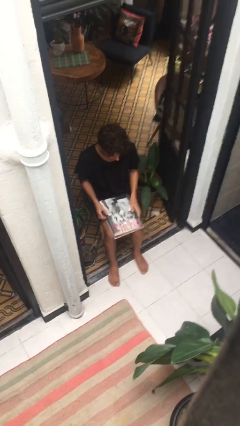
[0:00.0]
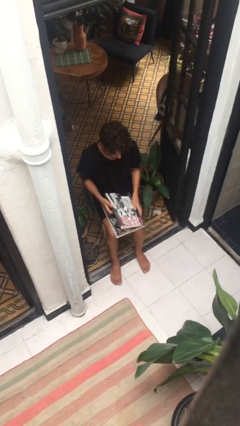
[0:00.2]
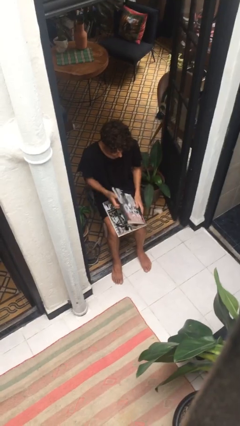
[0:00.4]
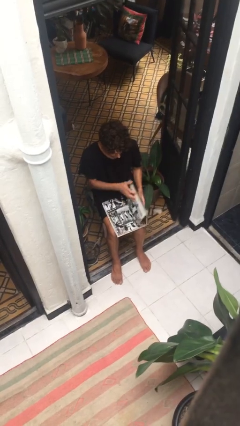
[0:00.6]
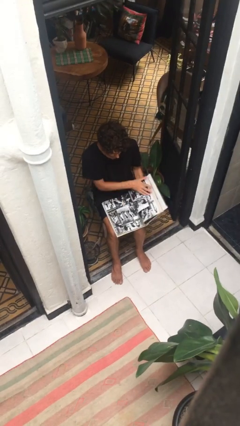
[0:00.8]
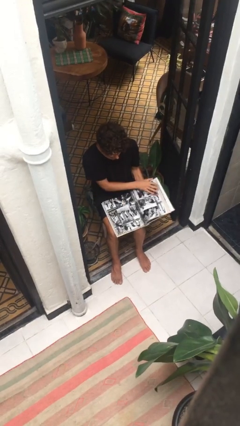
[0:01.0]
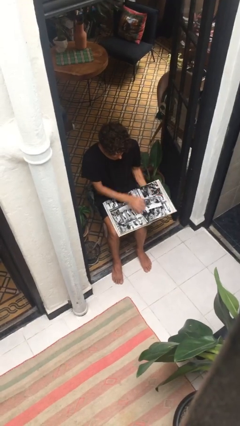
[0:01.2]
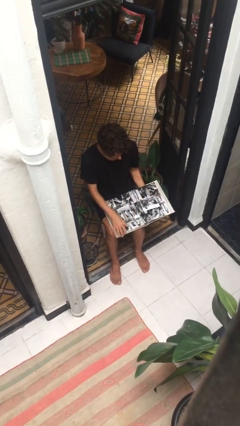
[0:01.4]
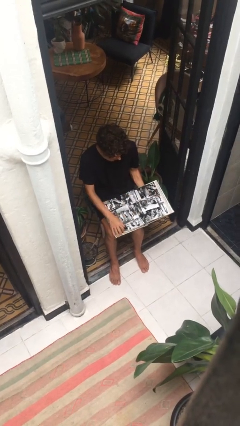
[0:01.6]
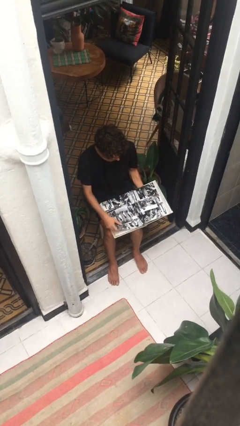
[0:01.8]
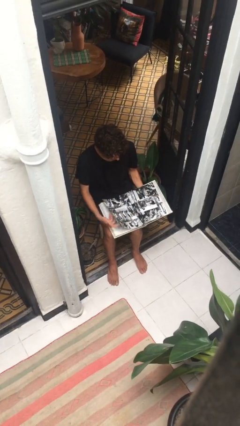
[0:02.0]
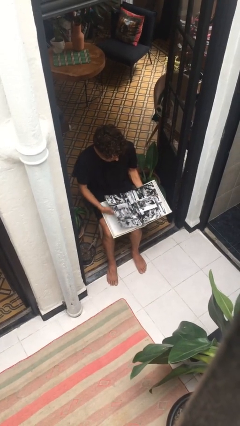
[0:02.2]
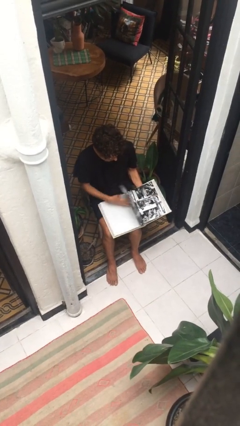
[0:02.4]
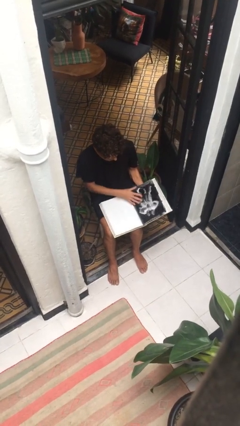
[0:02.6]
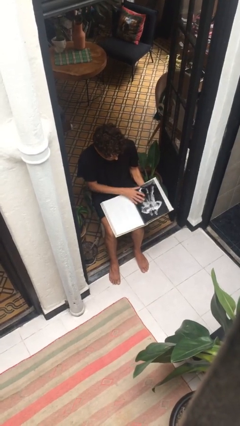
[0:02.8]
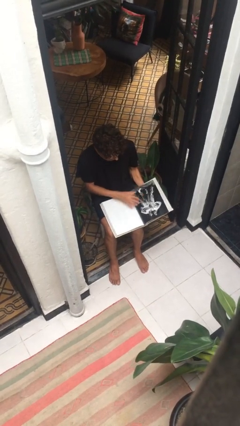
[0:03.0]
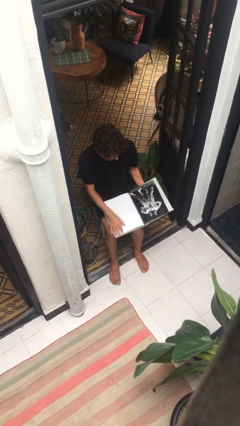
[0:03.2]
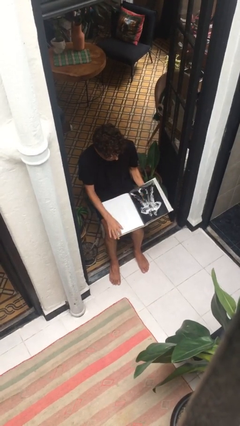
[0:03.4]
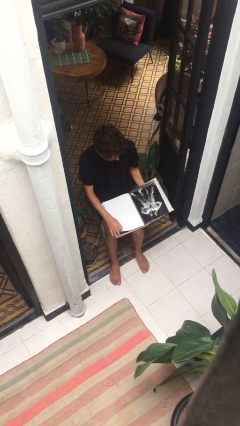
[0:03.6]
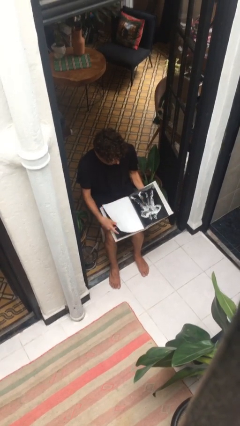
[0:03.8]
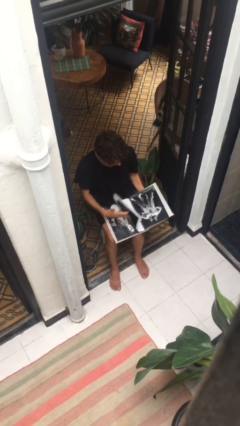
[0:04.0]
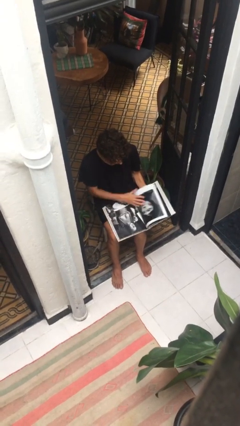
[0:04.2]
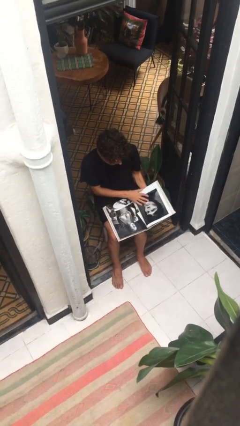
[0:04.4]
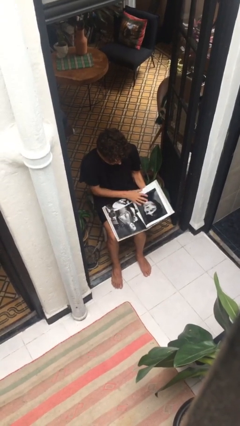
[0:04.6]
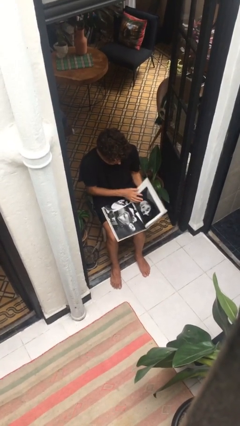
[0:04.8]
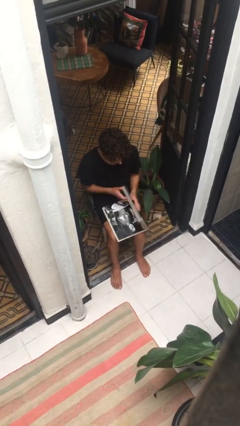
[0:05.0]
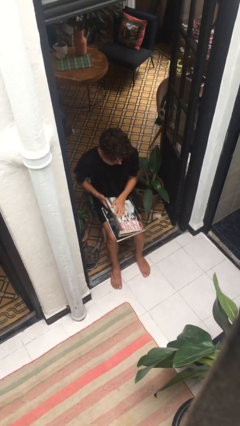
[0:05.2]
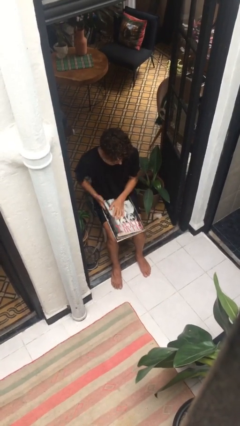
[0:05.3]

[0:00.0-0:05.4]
person reads document

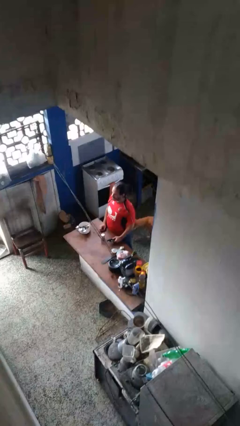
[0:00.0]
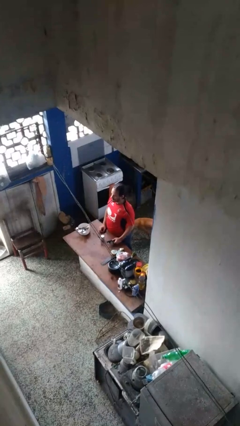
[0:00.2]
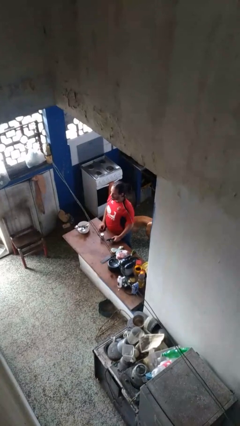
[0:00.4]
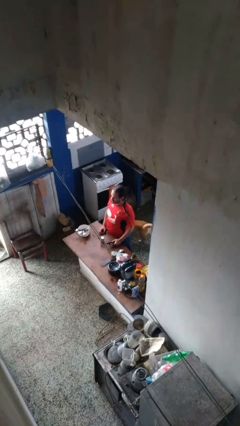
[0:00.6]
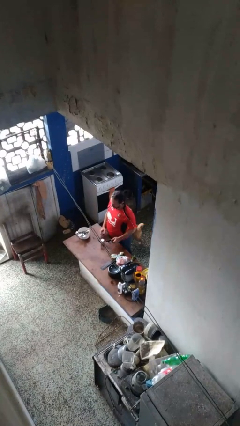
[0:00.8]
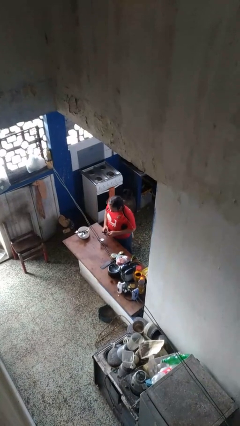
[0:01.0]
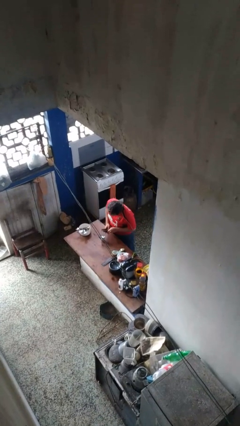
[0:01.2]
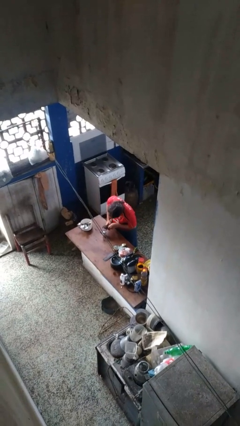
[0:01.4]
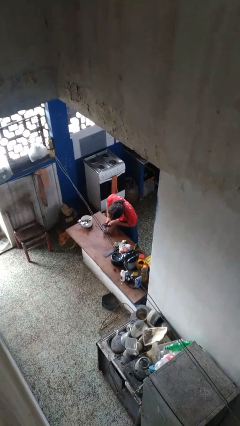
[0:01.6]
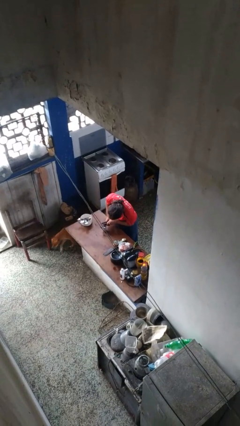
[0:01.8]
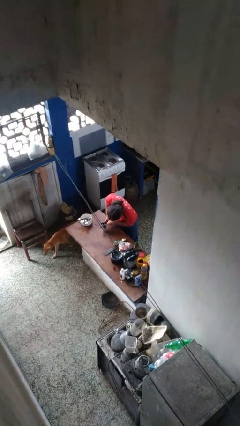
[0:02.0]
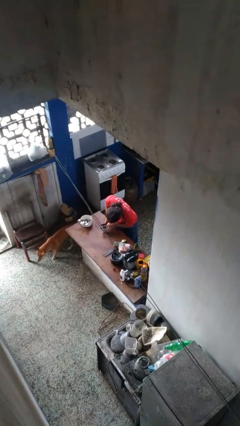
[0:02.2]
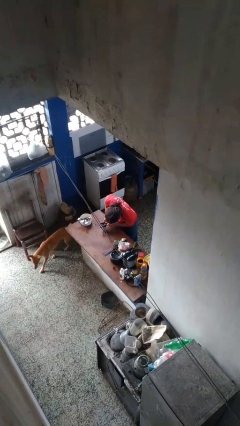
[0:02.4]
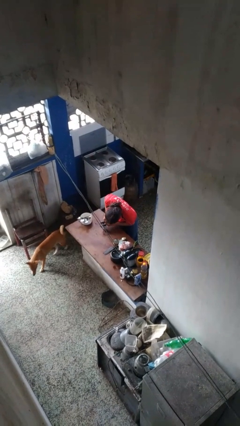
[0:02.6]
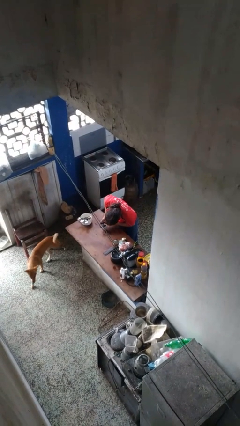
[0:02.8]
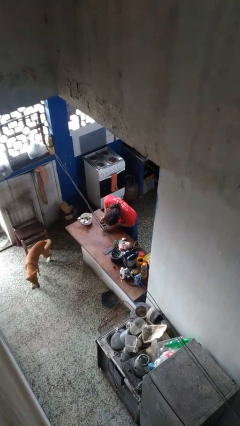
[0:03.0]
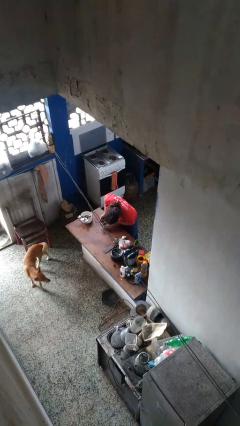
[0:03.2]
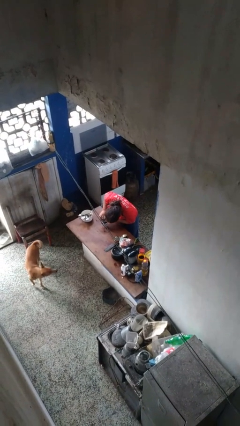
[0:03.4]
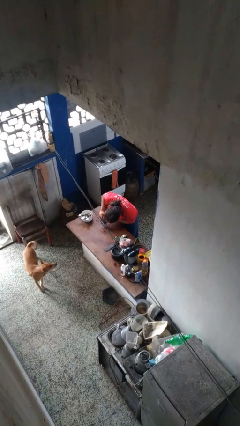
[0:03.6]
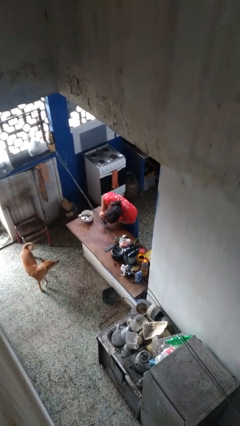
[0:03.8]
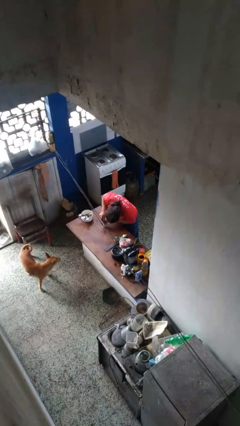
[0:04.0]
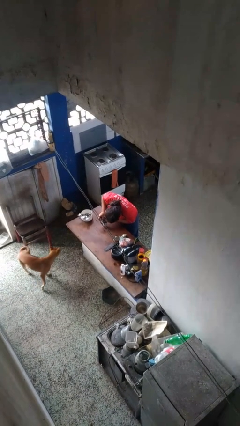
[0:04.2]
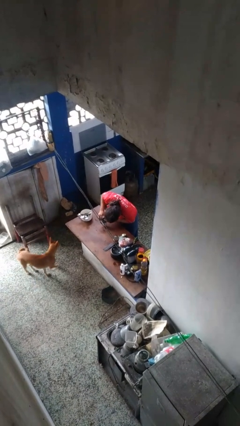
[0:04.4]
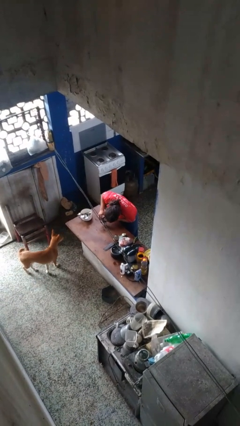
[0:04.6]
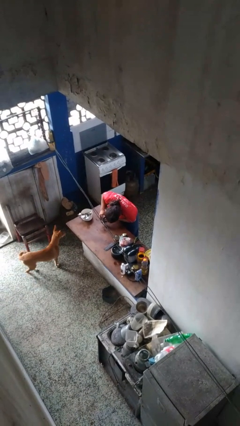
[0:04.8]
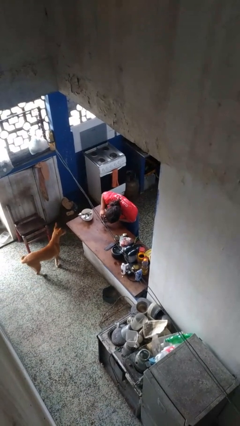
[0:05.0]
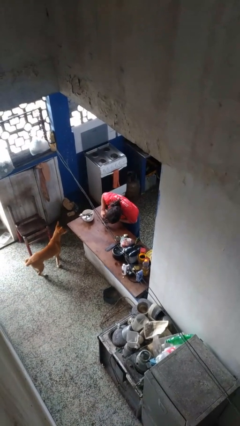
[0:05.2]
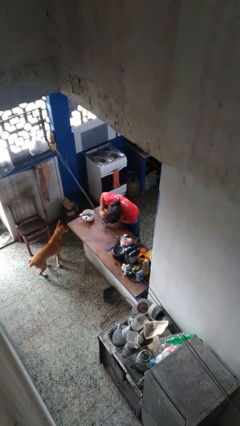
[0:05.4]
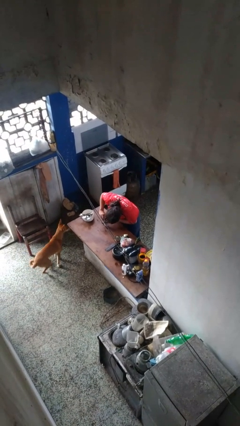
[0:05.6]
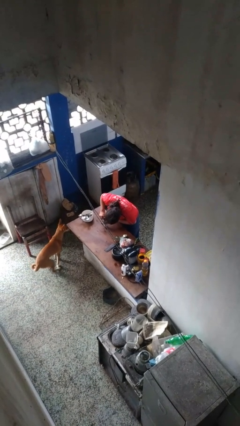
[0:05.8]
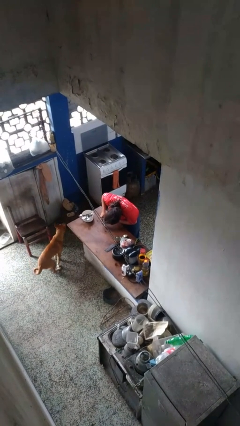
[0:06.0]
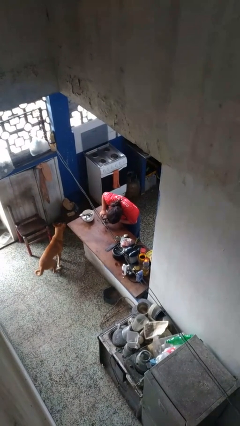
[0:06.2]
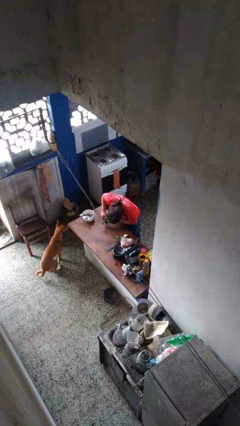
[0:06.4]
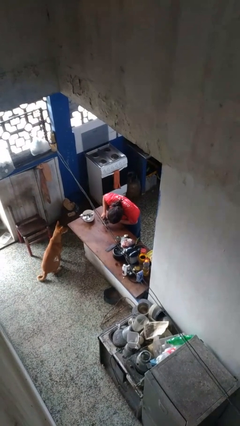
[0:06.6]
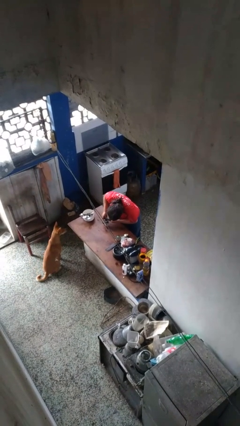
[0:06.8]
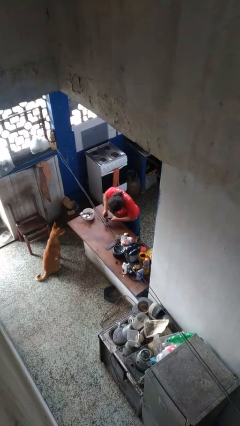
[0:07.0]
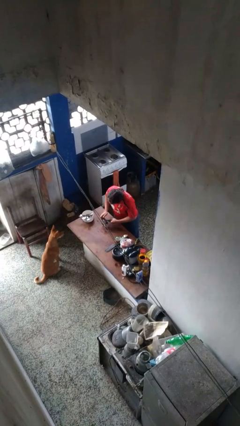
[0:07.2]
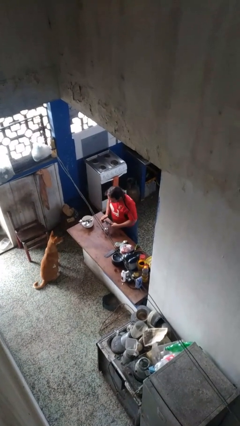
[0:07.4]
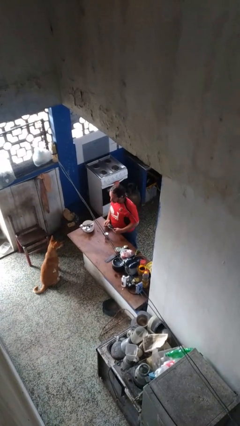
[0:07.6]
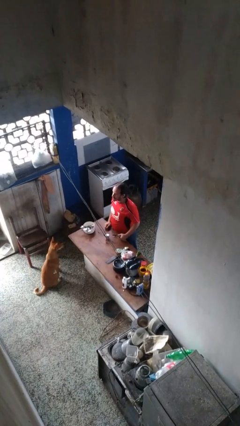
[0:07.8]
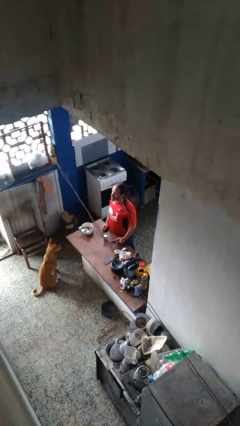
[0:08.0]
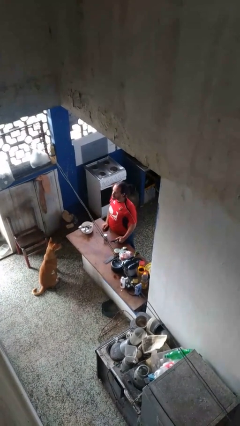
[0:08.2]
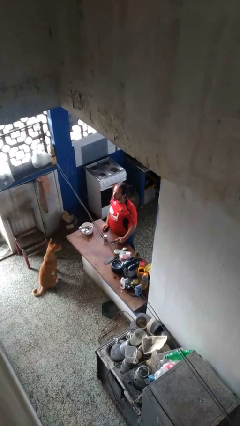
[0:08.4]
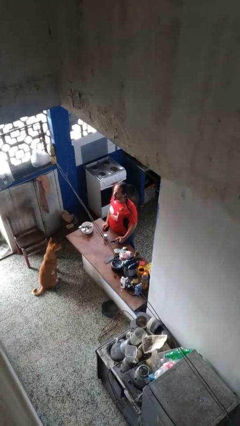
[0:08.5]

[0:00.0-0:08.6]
person opens can with can opener

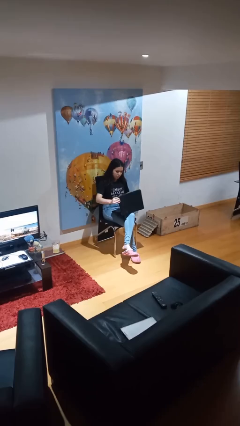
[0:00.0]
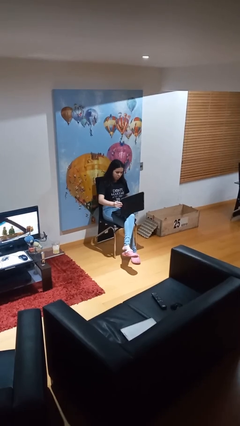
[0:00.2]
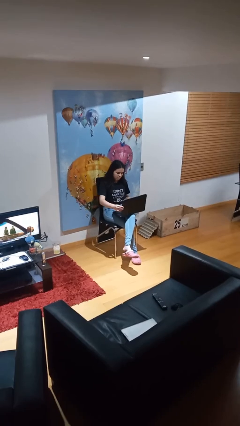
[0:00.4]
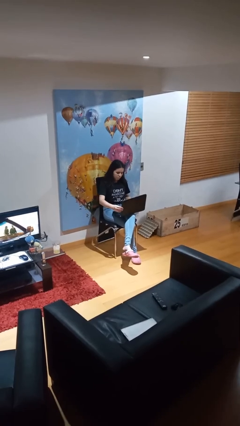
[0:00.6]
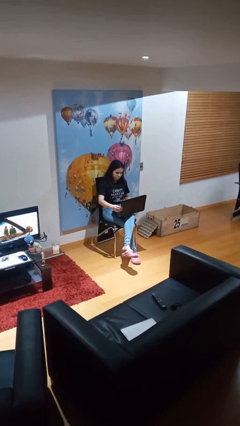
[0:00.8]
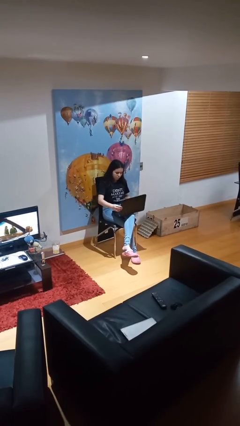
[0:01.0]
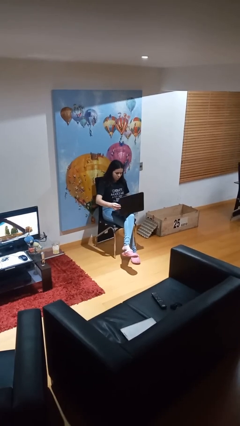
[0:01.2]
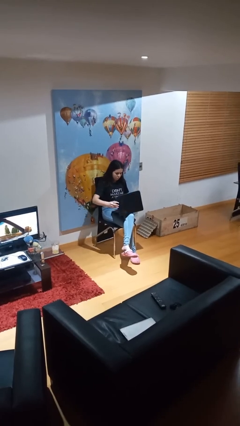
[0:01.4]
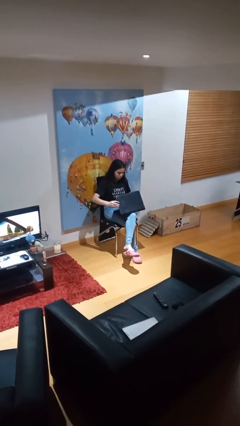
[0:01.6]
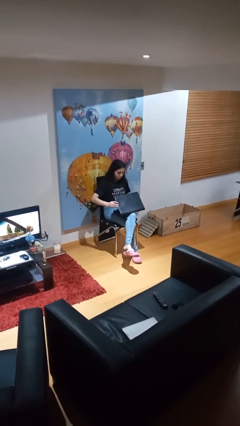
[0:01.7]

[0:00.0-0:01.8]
person interacts with laptop

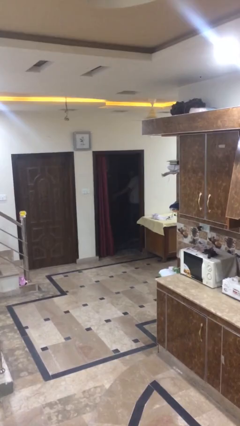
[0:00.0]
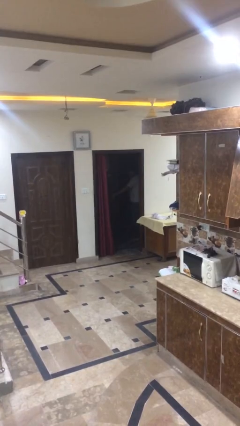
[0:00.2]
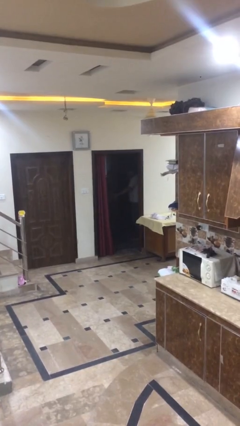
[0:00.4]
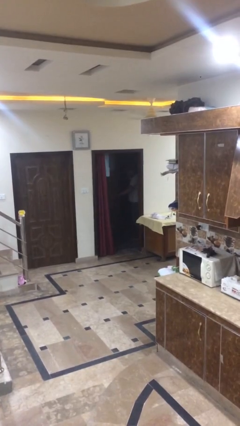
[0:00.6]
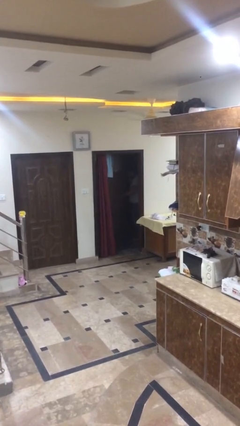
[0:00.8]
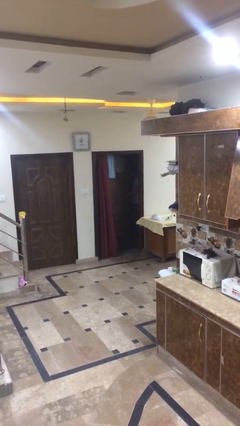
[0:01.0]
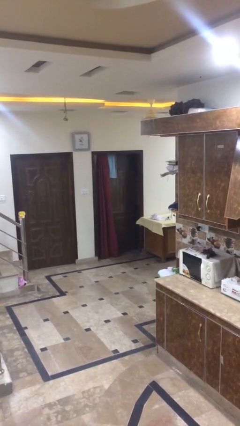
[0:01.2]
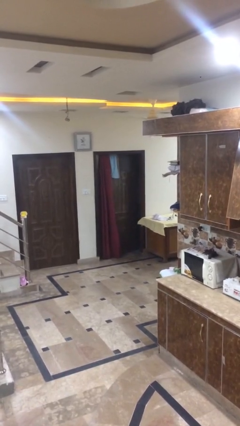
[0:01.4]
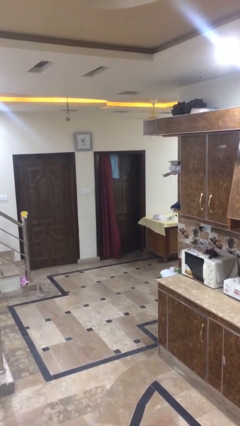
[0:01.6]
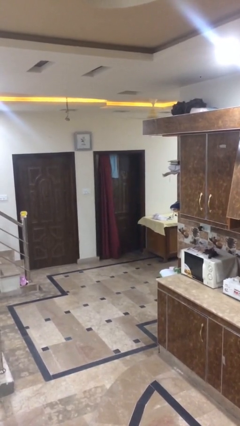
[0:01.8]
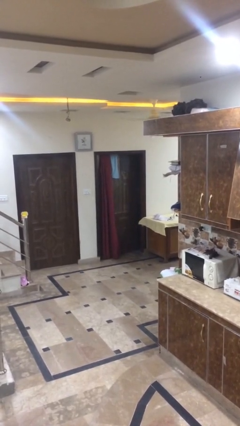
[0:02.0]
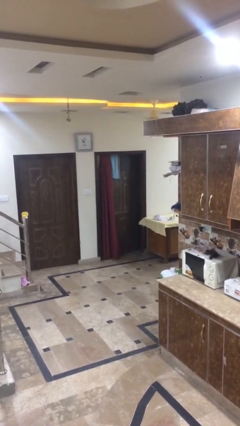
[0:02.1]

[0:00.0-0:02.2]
person closes facility door
